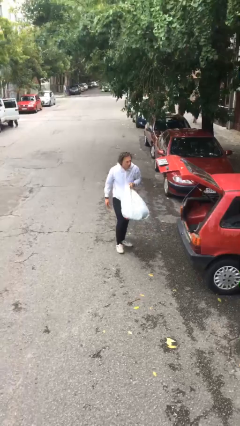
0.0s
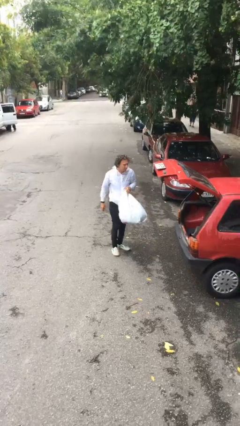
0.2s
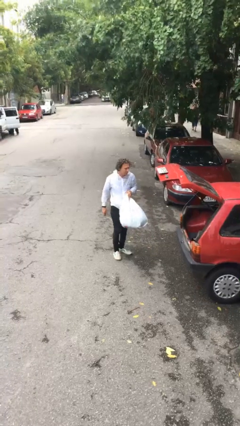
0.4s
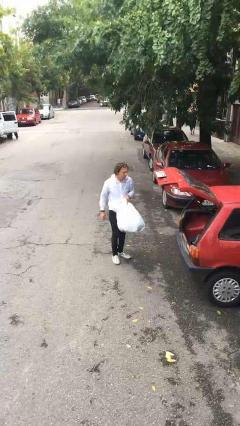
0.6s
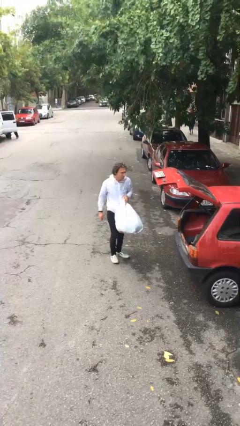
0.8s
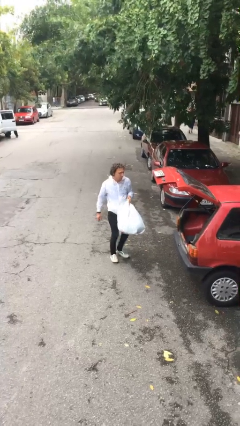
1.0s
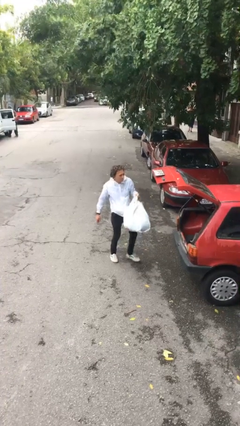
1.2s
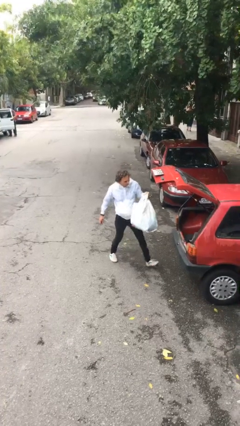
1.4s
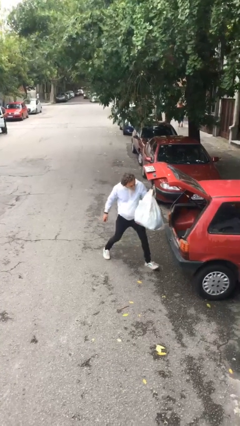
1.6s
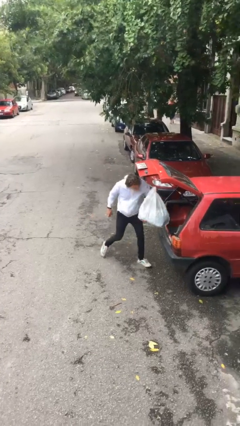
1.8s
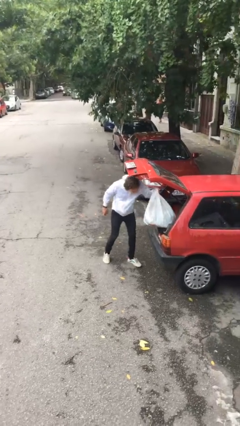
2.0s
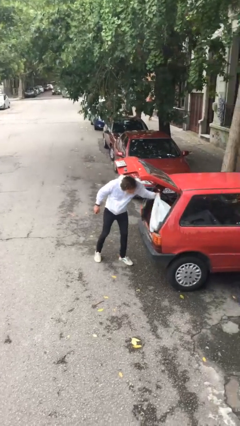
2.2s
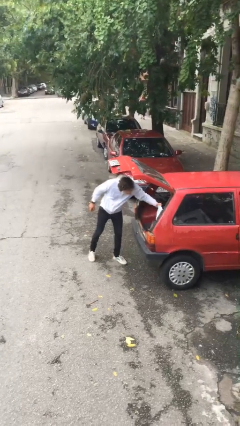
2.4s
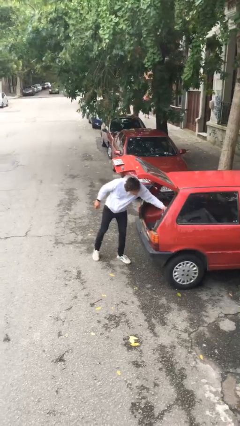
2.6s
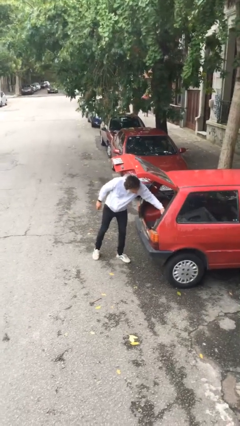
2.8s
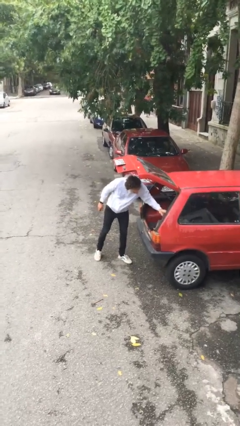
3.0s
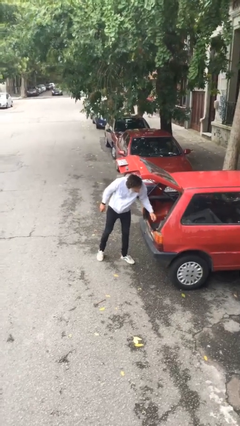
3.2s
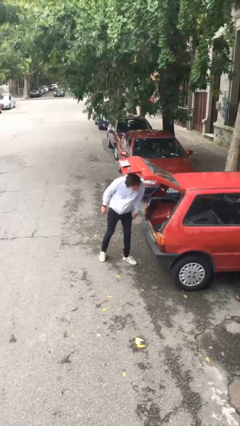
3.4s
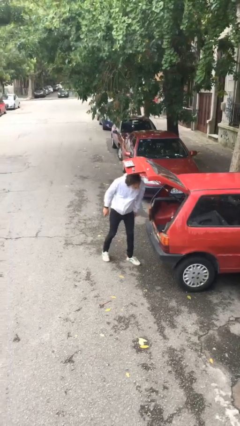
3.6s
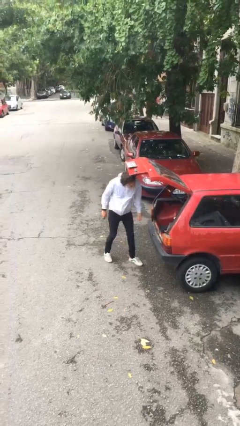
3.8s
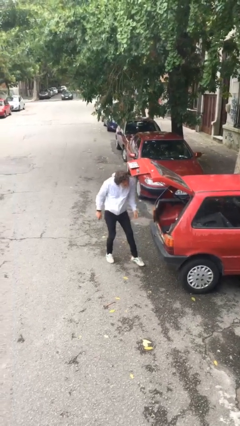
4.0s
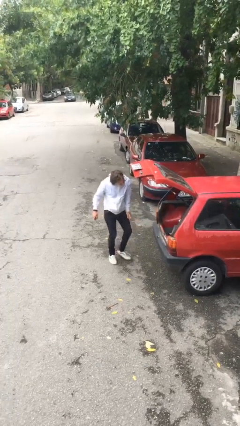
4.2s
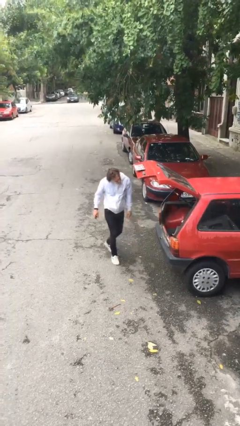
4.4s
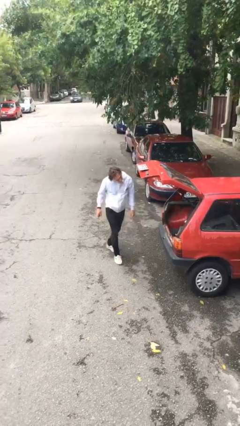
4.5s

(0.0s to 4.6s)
person loads car

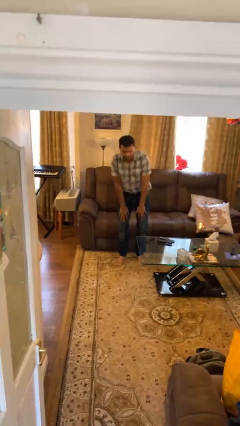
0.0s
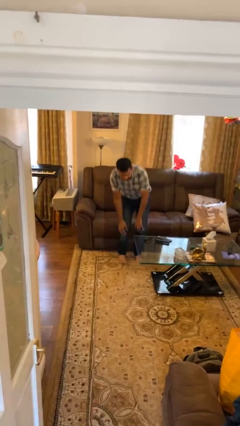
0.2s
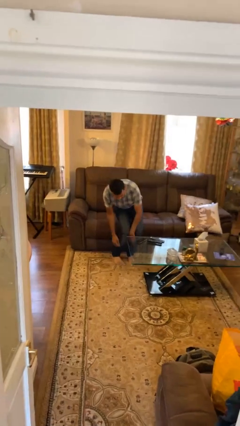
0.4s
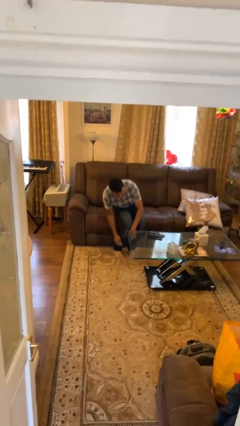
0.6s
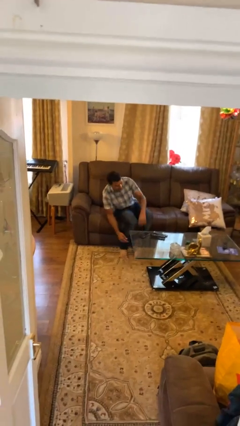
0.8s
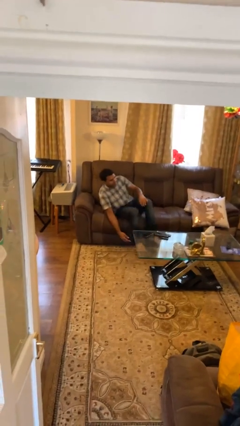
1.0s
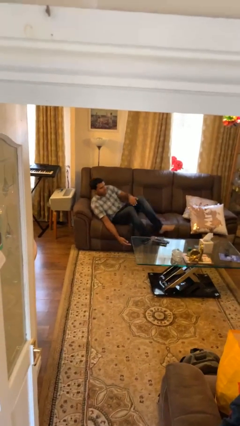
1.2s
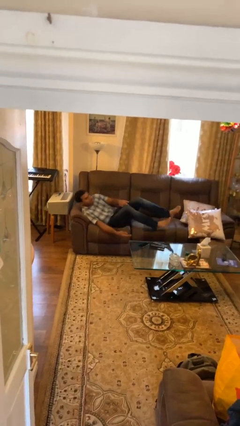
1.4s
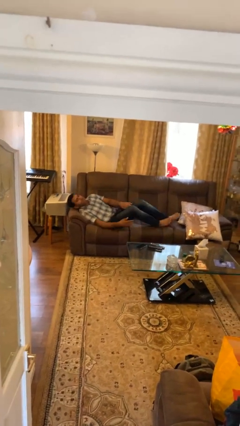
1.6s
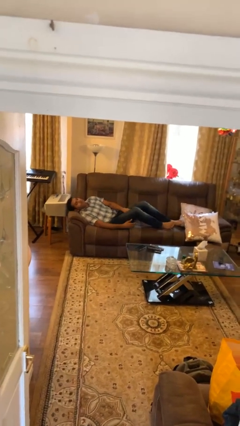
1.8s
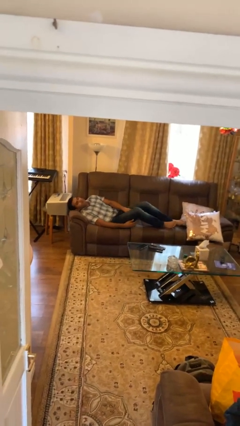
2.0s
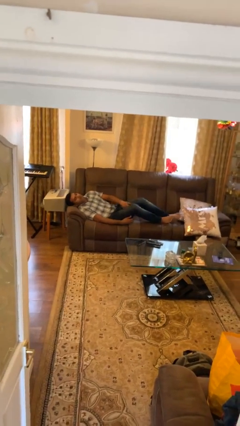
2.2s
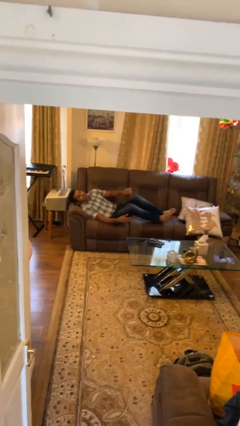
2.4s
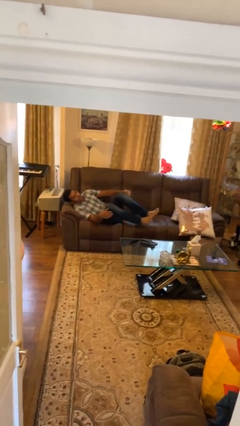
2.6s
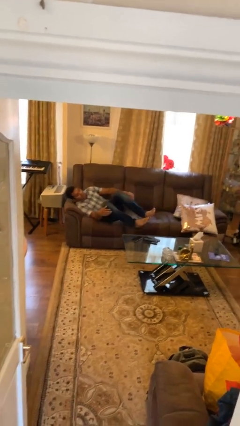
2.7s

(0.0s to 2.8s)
person lies down on couch

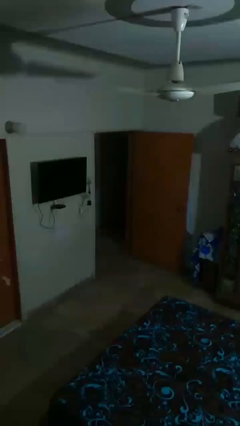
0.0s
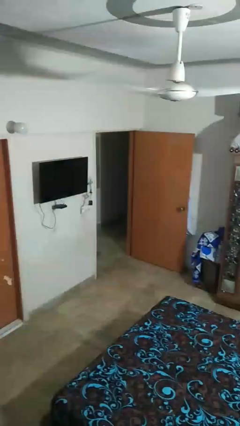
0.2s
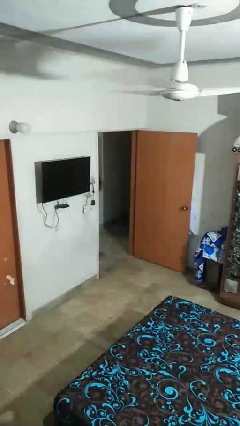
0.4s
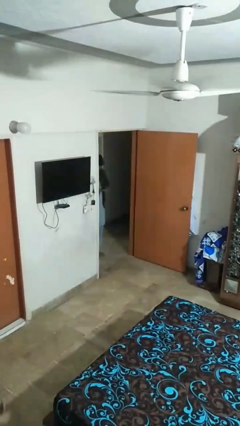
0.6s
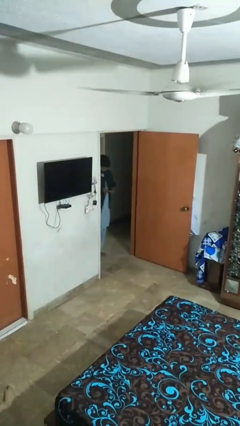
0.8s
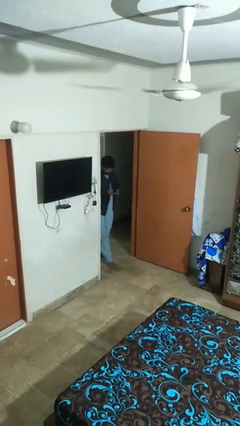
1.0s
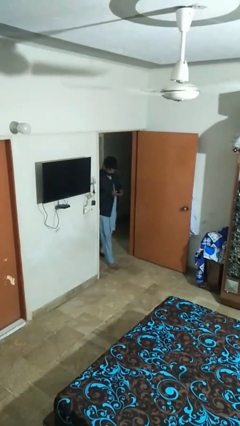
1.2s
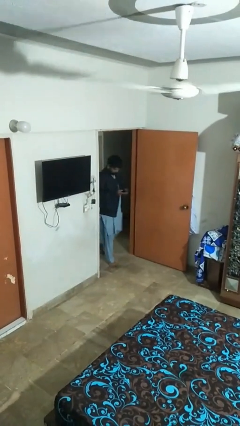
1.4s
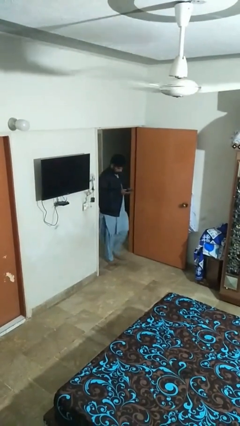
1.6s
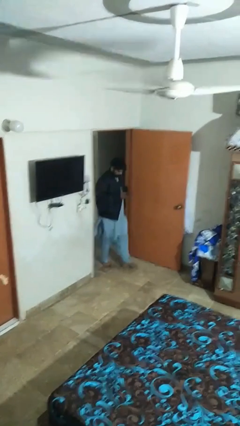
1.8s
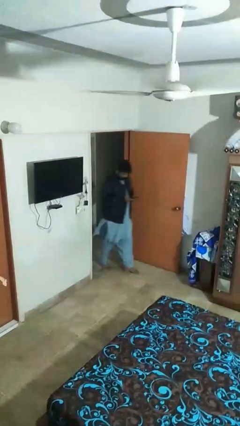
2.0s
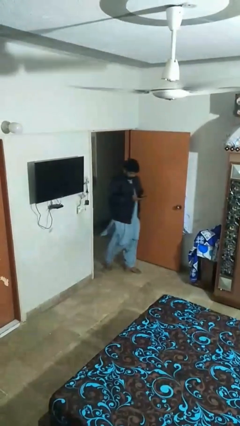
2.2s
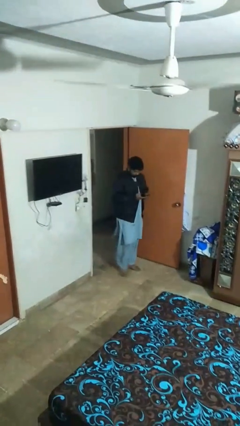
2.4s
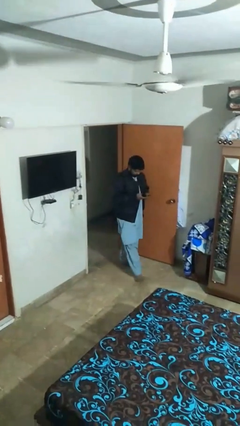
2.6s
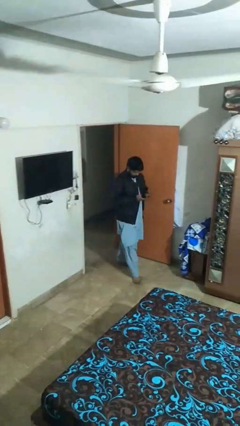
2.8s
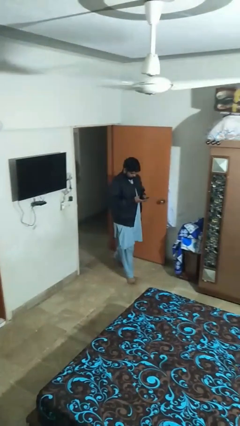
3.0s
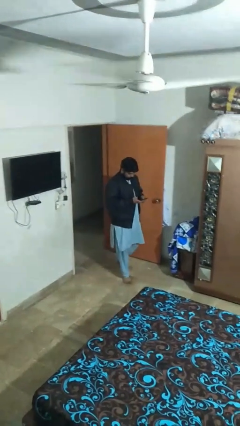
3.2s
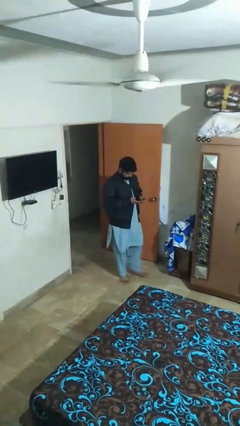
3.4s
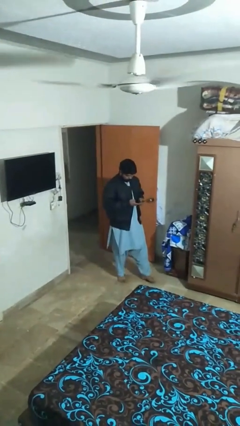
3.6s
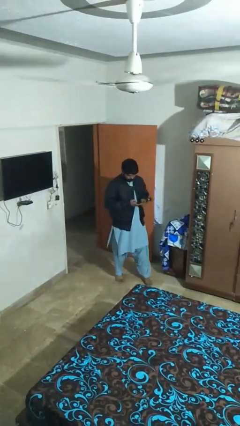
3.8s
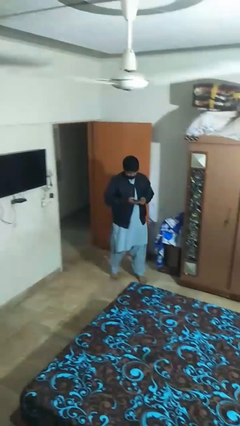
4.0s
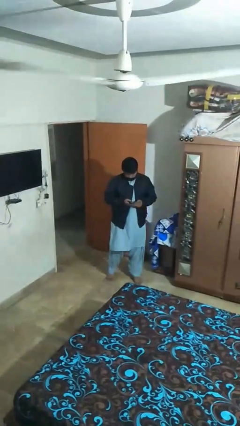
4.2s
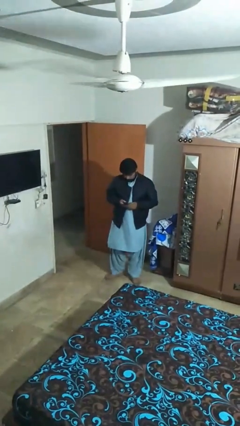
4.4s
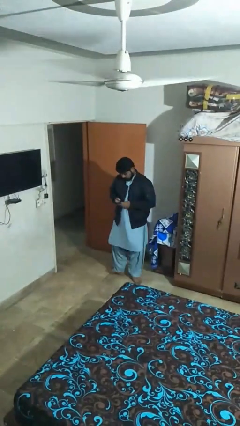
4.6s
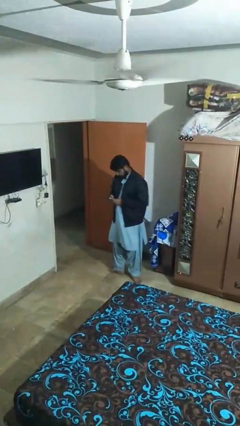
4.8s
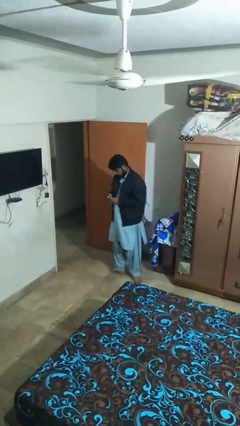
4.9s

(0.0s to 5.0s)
person enters scene through structure

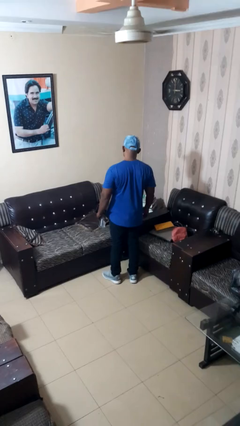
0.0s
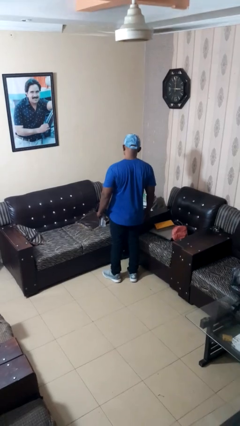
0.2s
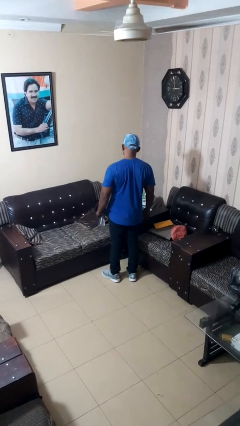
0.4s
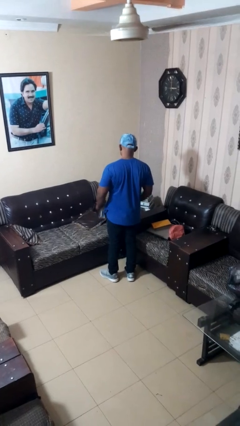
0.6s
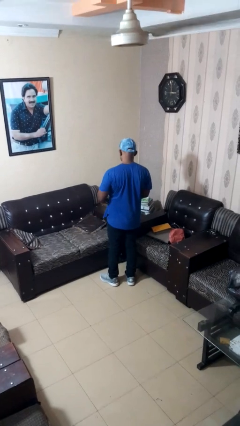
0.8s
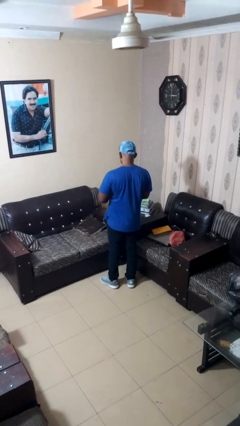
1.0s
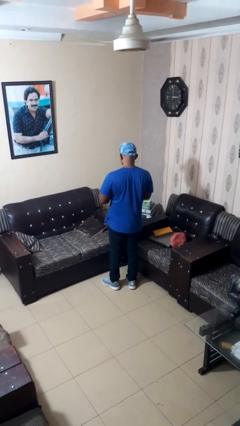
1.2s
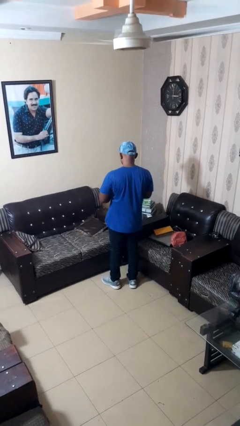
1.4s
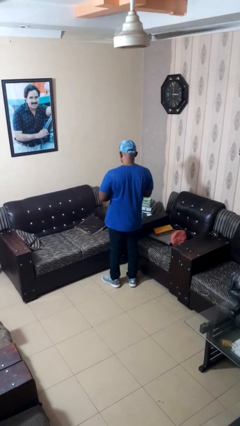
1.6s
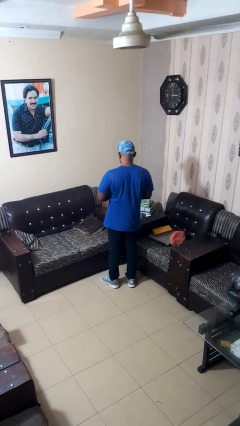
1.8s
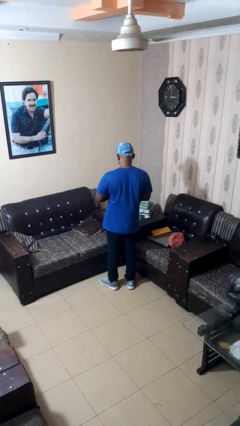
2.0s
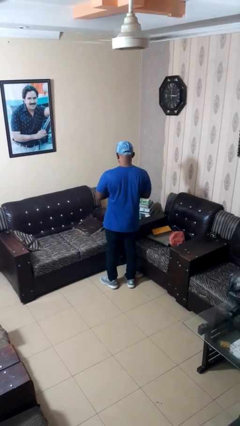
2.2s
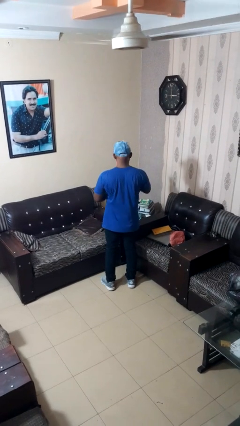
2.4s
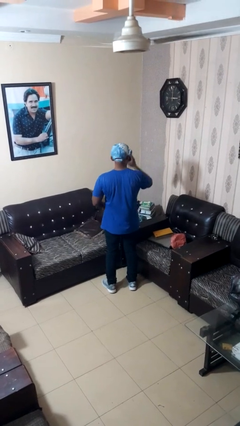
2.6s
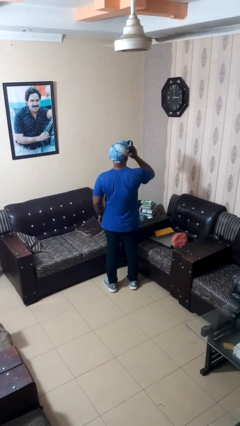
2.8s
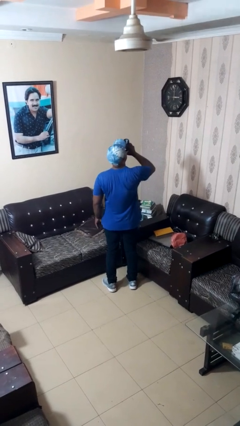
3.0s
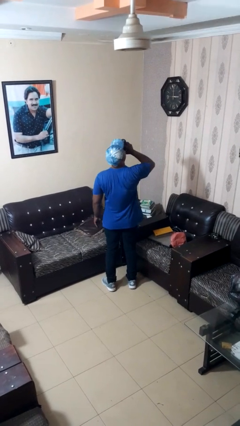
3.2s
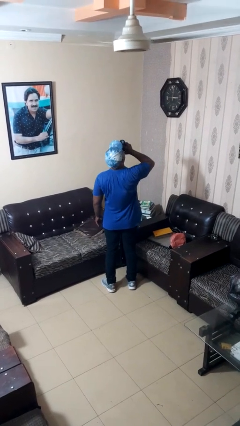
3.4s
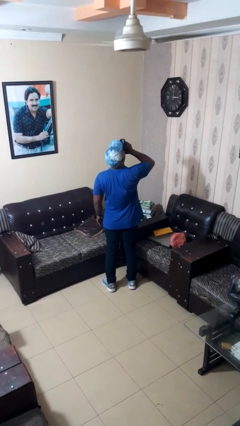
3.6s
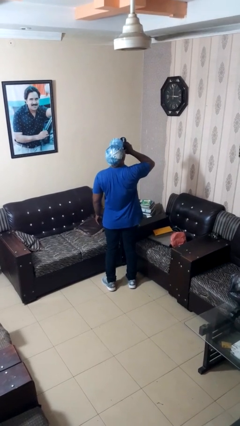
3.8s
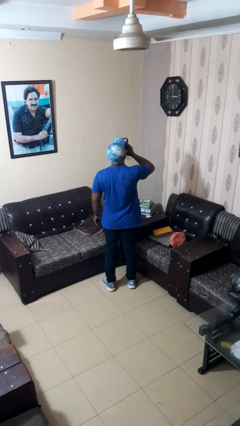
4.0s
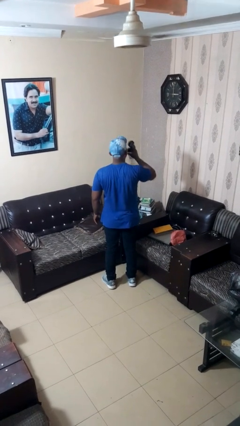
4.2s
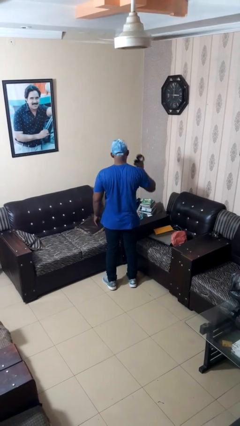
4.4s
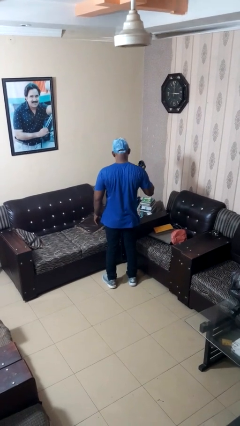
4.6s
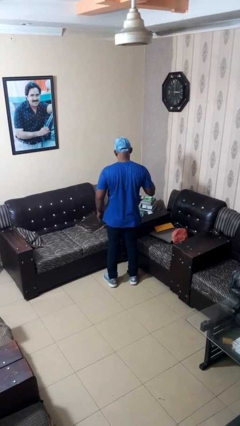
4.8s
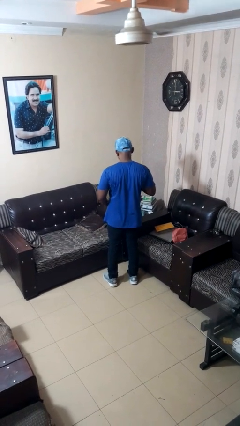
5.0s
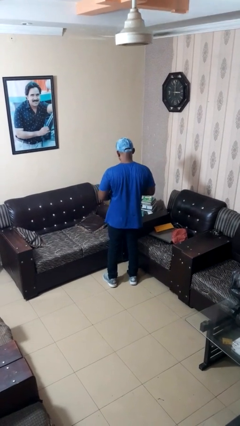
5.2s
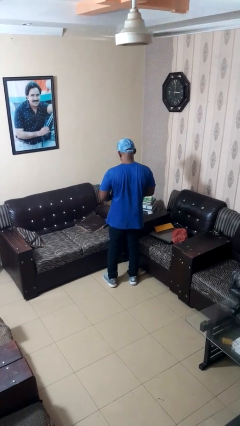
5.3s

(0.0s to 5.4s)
person drinks from bottle

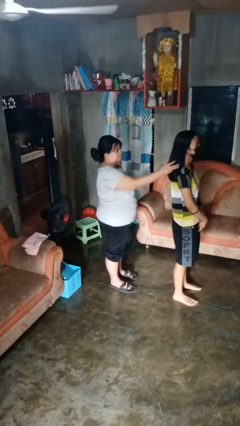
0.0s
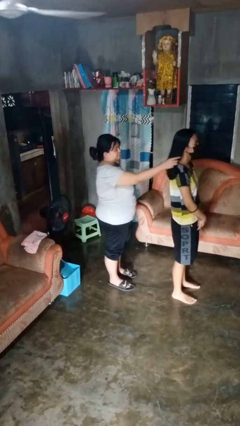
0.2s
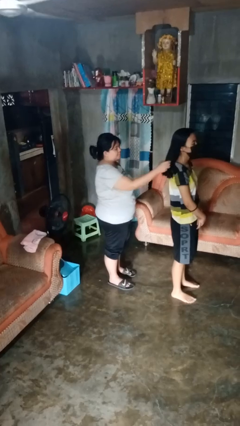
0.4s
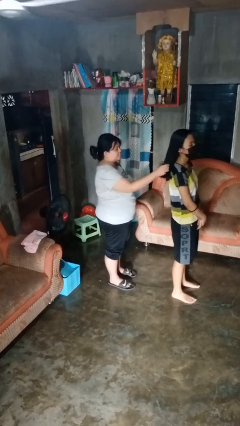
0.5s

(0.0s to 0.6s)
person grabs person by hair
